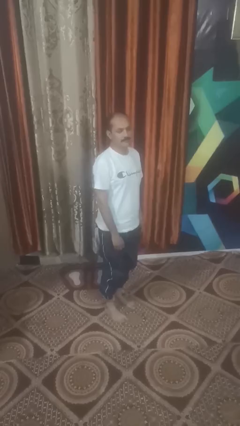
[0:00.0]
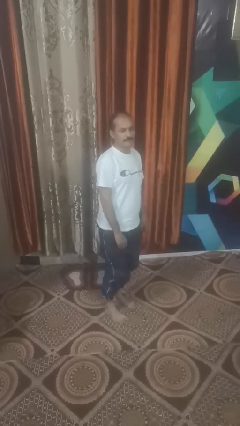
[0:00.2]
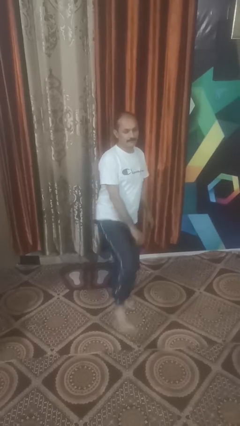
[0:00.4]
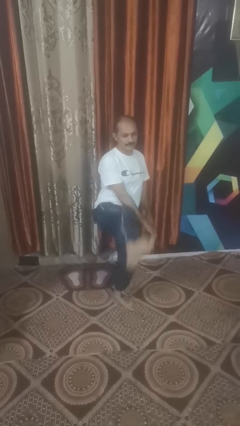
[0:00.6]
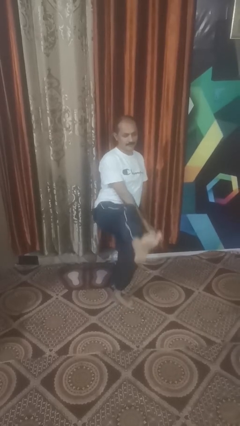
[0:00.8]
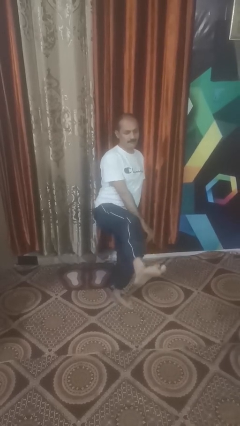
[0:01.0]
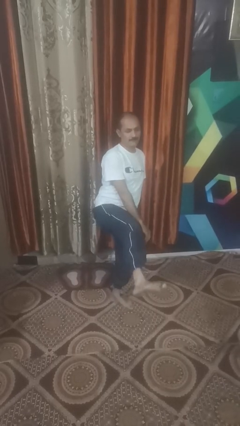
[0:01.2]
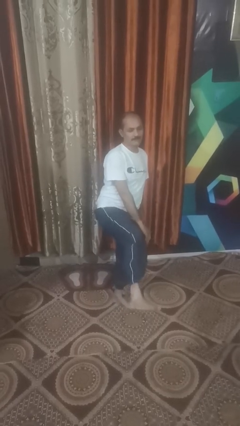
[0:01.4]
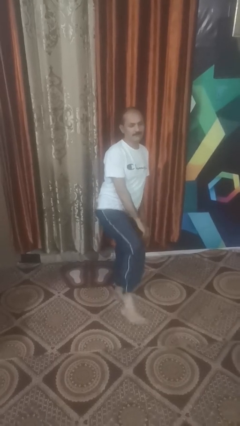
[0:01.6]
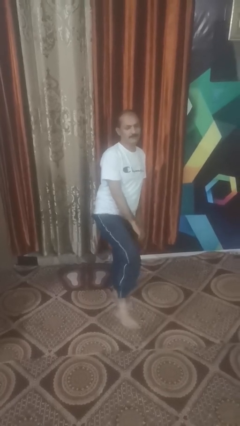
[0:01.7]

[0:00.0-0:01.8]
person karate kicks

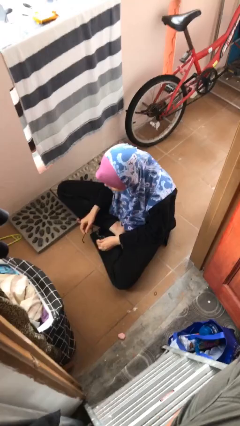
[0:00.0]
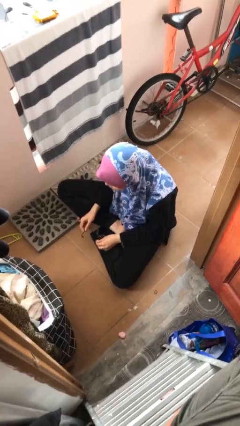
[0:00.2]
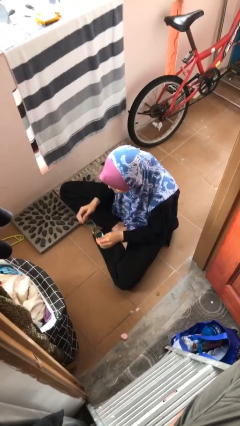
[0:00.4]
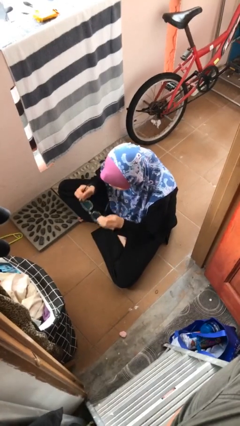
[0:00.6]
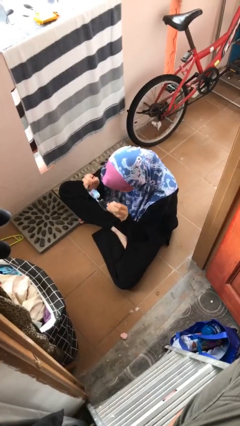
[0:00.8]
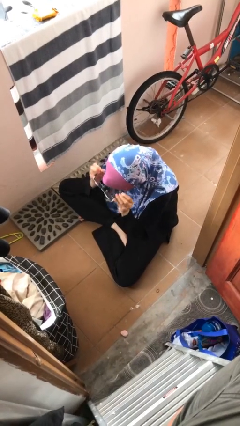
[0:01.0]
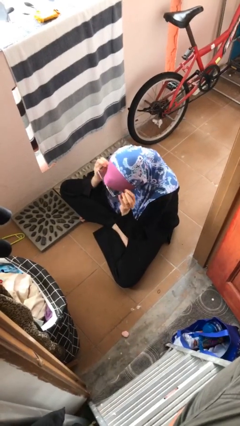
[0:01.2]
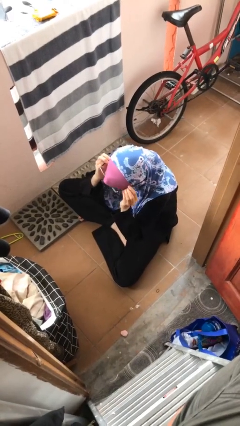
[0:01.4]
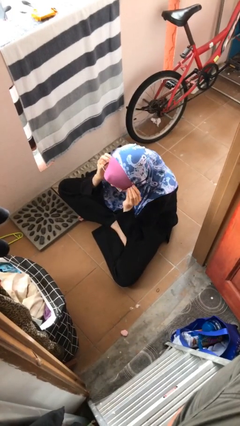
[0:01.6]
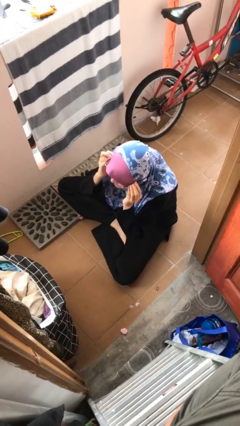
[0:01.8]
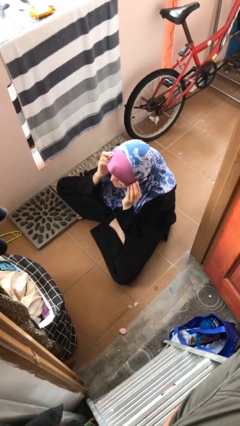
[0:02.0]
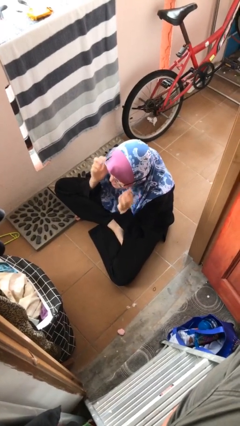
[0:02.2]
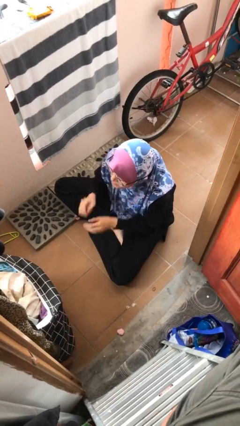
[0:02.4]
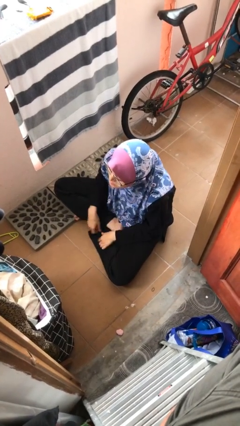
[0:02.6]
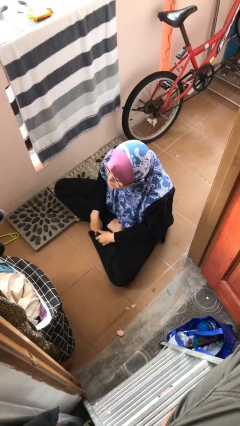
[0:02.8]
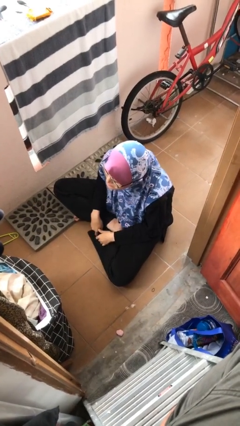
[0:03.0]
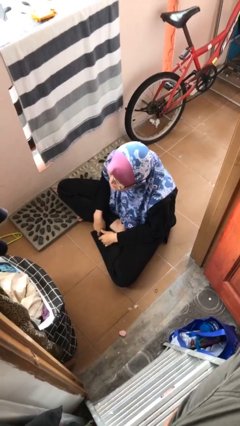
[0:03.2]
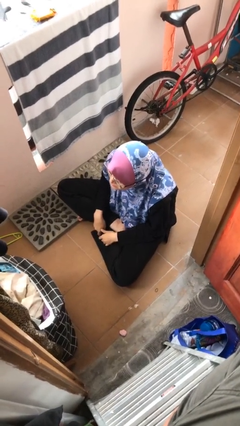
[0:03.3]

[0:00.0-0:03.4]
person puts on glasses

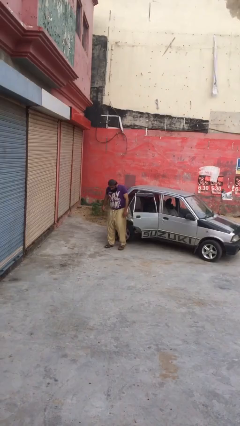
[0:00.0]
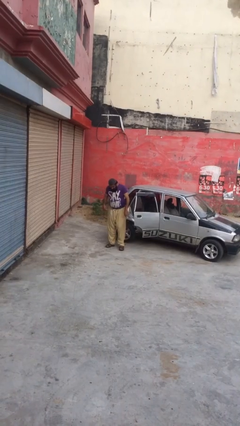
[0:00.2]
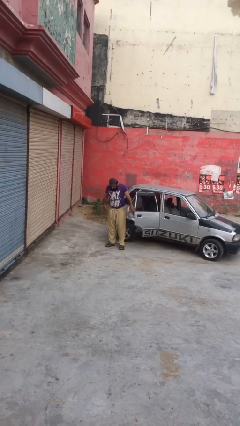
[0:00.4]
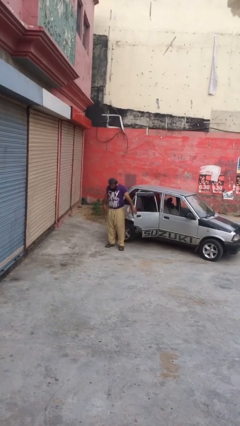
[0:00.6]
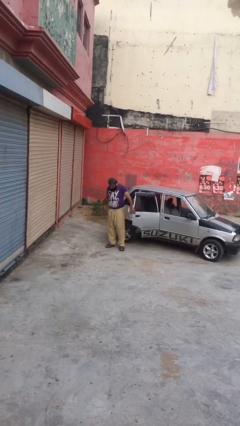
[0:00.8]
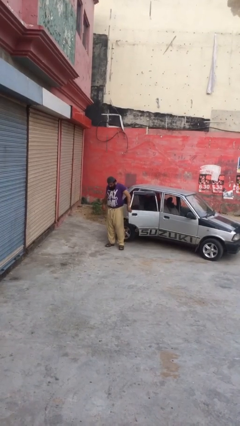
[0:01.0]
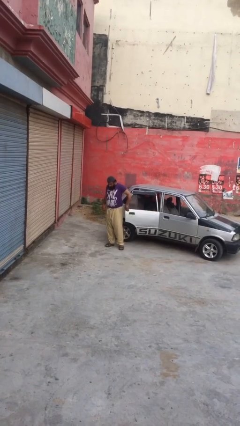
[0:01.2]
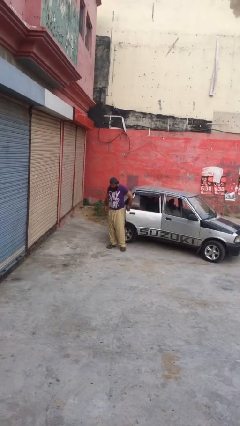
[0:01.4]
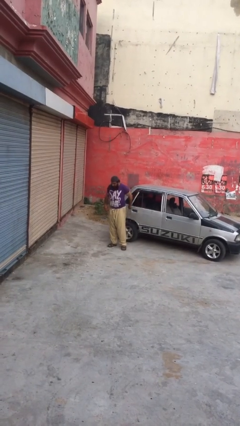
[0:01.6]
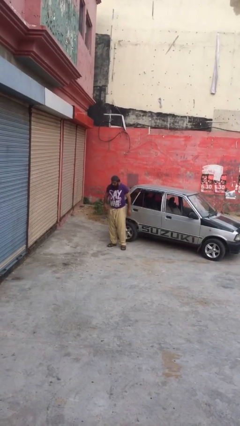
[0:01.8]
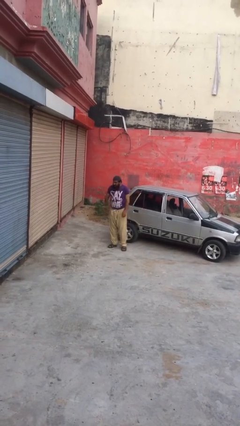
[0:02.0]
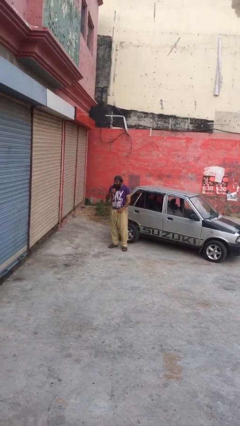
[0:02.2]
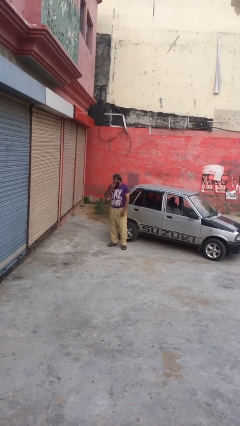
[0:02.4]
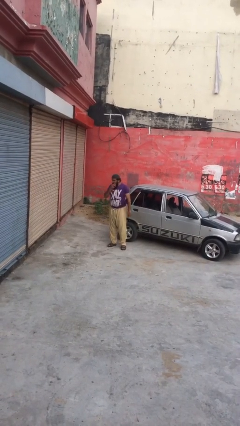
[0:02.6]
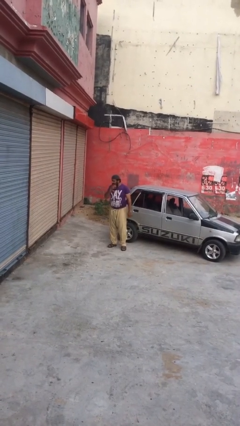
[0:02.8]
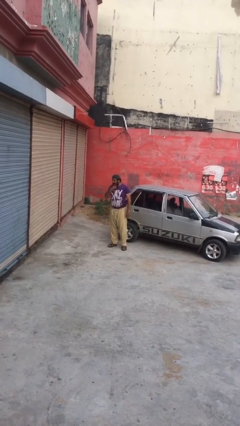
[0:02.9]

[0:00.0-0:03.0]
person closes car door

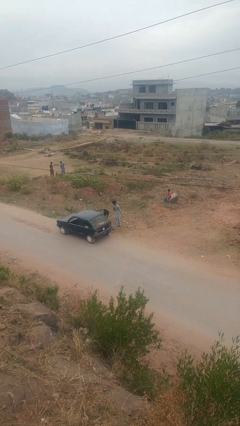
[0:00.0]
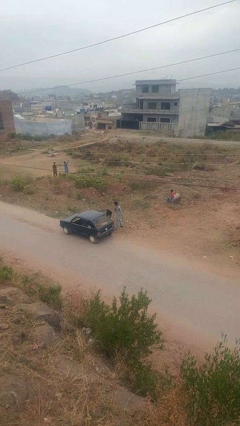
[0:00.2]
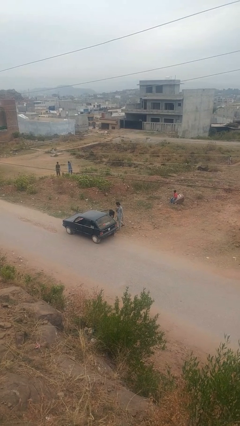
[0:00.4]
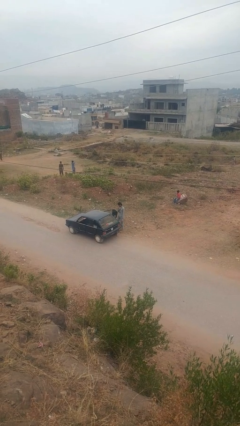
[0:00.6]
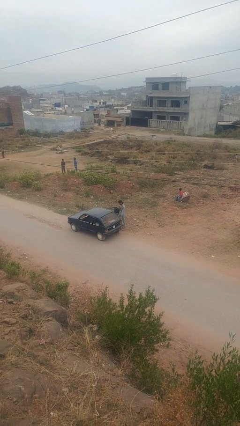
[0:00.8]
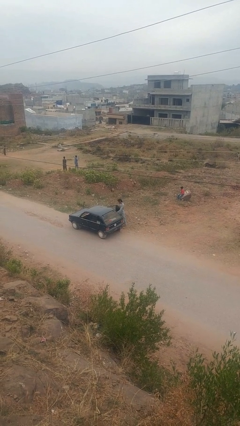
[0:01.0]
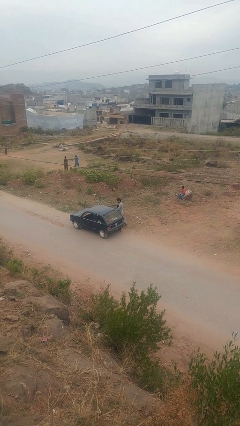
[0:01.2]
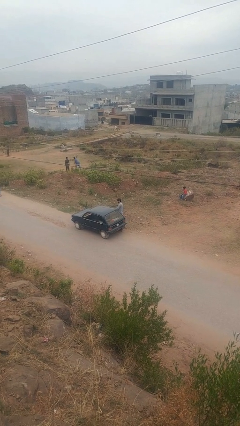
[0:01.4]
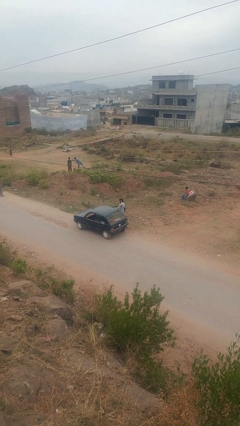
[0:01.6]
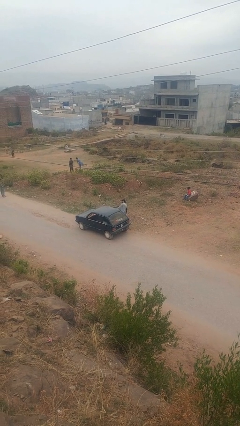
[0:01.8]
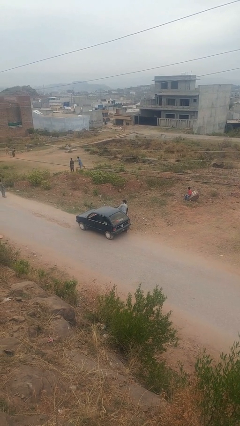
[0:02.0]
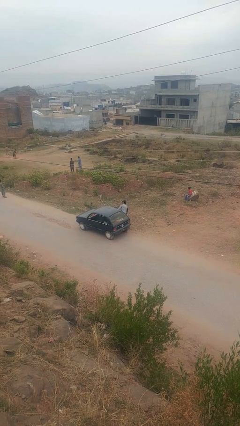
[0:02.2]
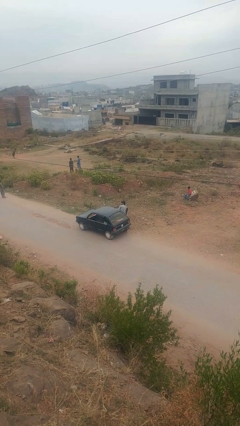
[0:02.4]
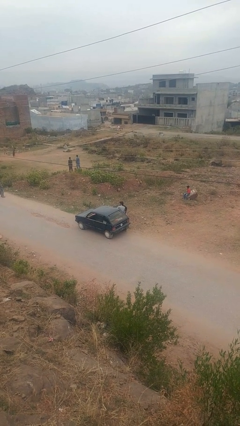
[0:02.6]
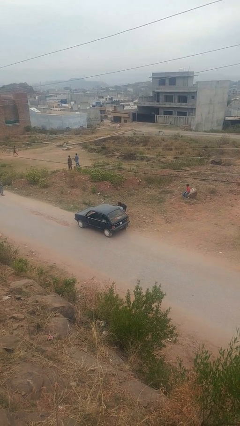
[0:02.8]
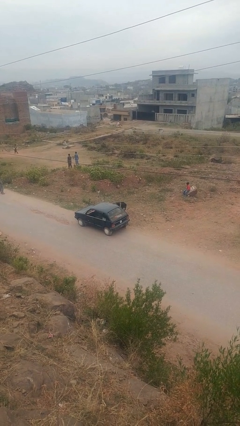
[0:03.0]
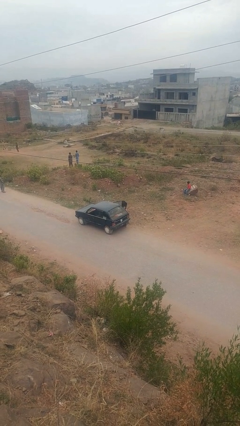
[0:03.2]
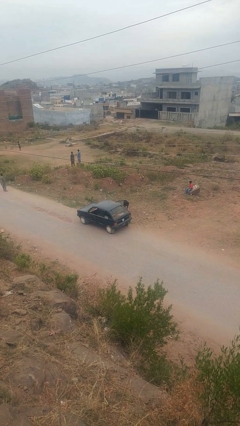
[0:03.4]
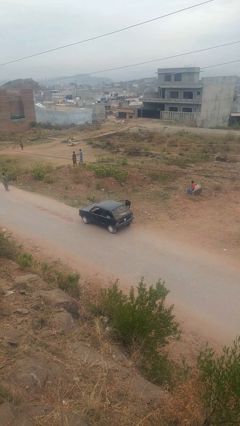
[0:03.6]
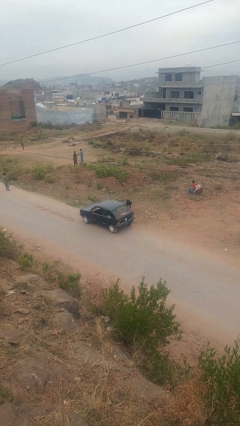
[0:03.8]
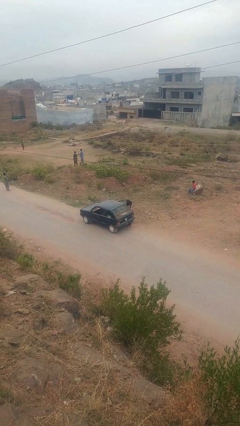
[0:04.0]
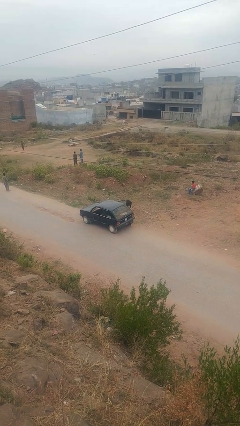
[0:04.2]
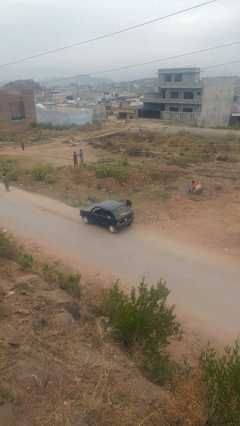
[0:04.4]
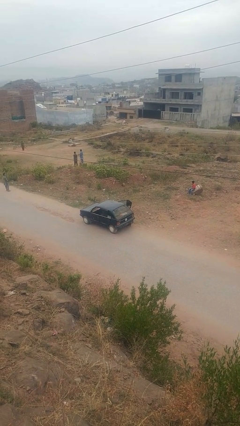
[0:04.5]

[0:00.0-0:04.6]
person enters car

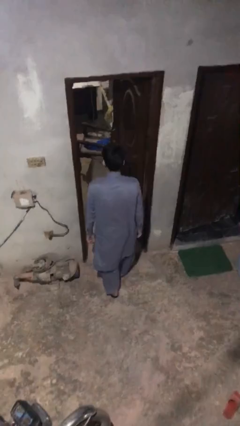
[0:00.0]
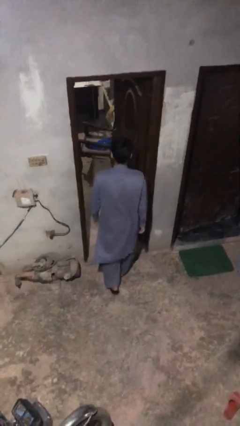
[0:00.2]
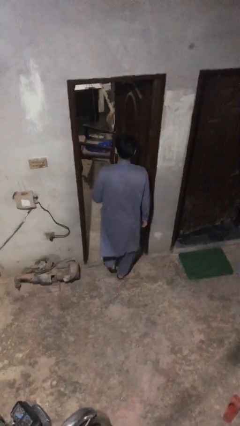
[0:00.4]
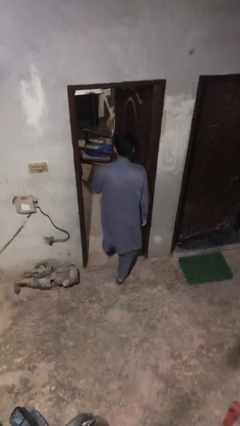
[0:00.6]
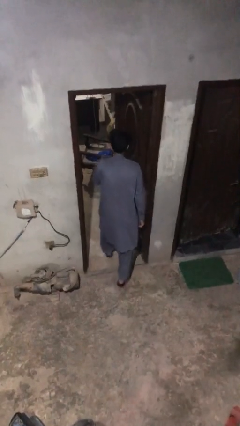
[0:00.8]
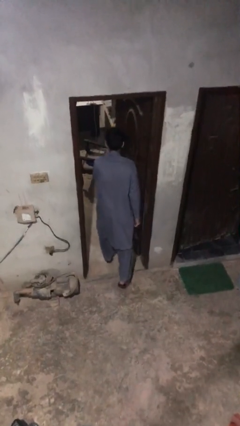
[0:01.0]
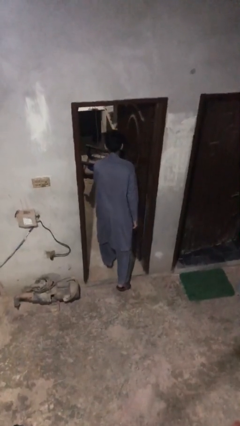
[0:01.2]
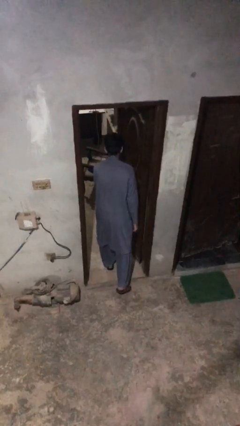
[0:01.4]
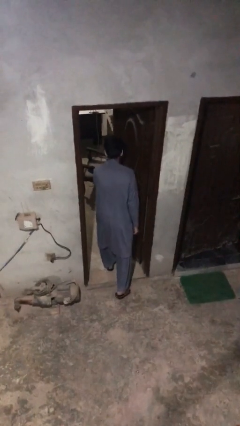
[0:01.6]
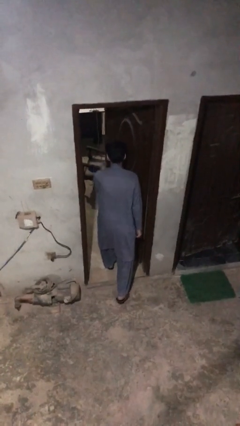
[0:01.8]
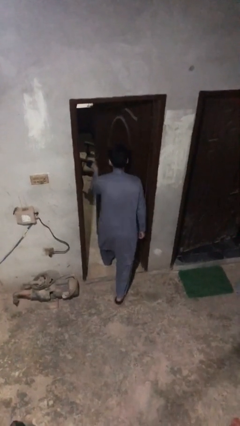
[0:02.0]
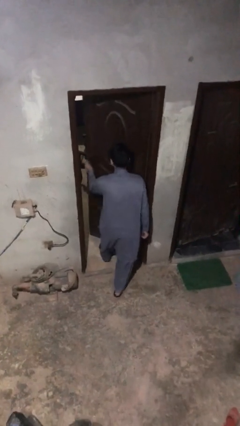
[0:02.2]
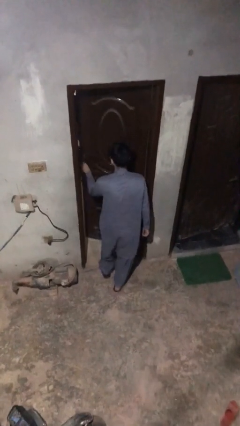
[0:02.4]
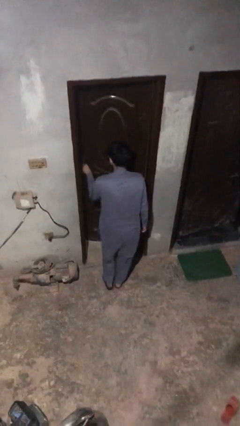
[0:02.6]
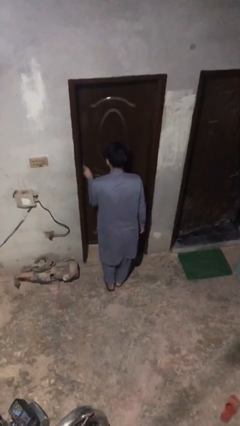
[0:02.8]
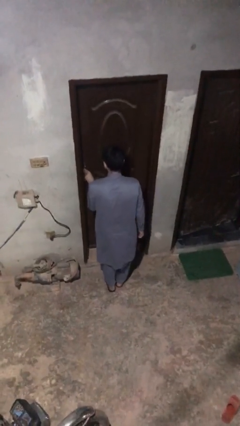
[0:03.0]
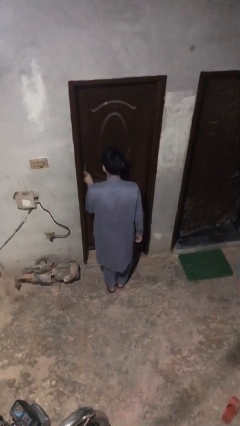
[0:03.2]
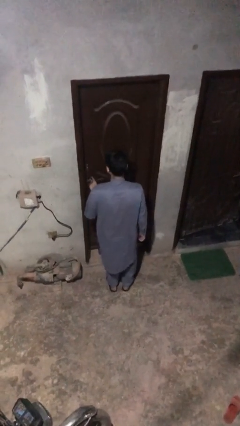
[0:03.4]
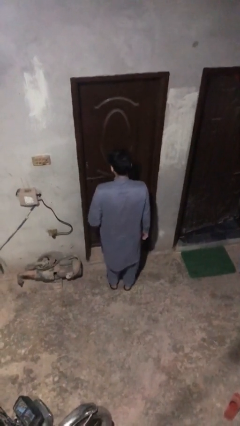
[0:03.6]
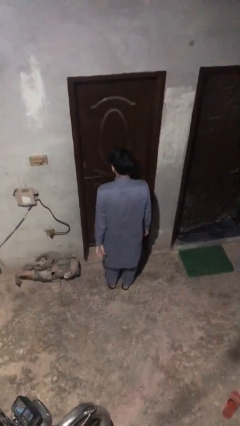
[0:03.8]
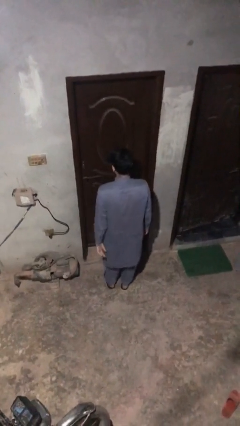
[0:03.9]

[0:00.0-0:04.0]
person closes facility door

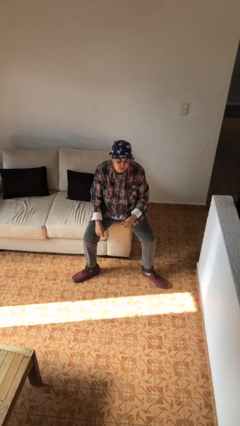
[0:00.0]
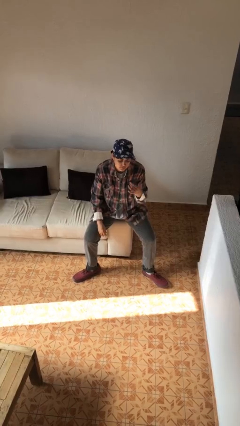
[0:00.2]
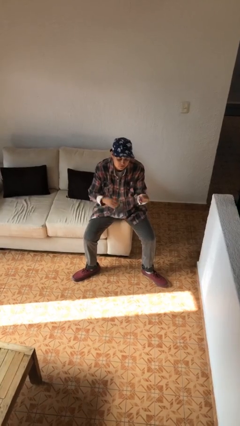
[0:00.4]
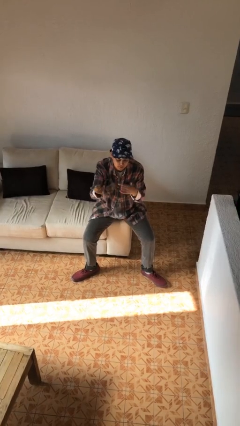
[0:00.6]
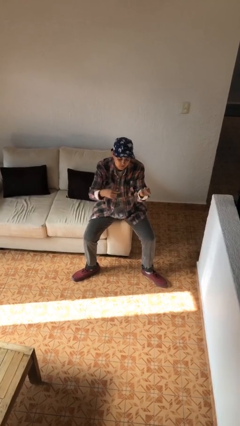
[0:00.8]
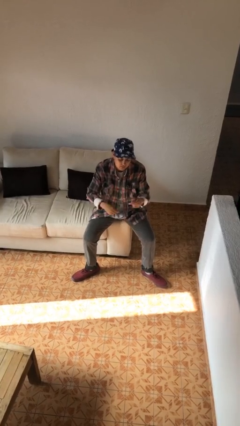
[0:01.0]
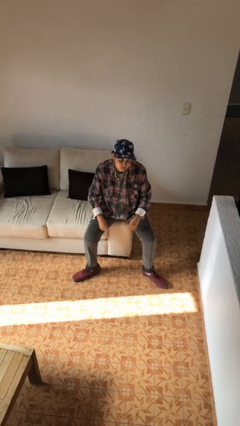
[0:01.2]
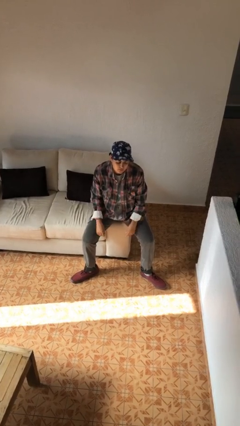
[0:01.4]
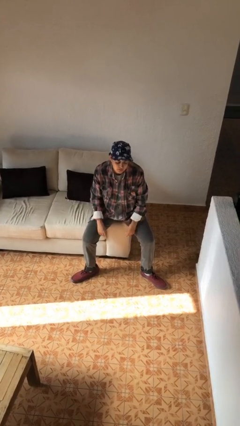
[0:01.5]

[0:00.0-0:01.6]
person snaps fingers
